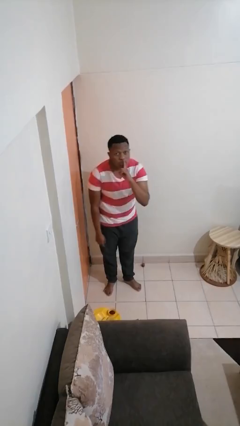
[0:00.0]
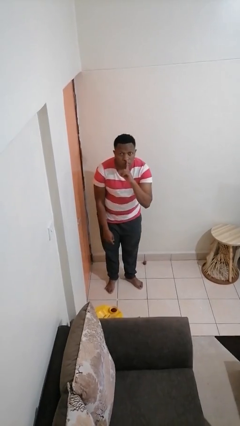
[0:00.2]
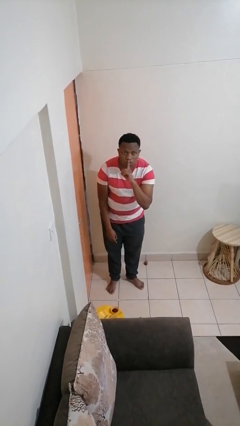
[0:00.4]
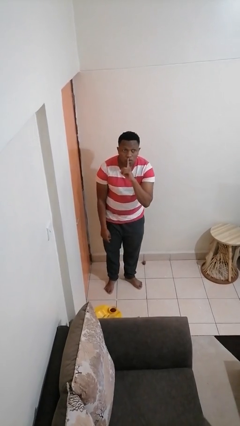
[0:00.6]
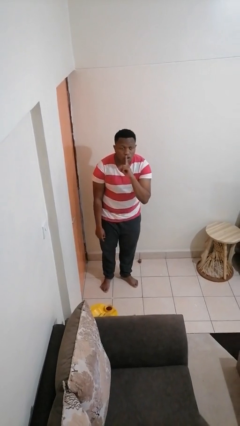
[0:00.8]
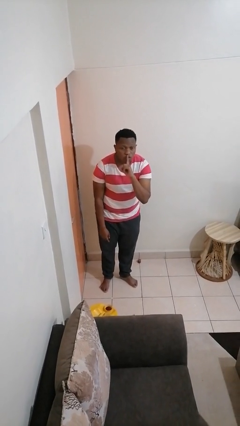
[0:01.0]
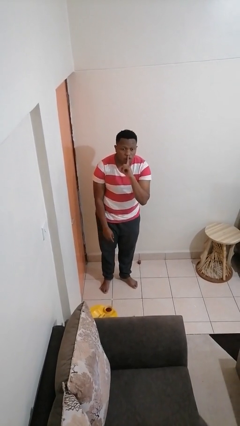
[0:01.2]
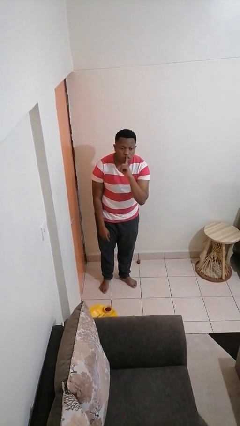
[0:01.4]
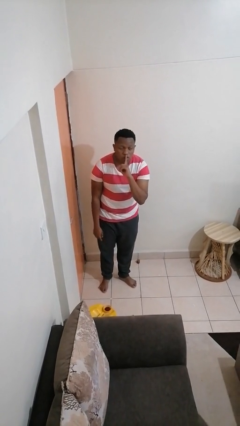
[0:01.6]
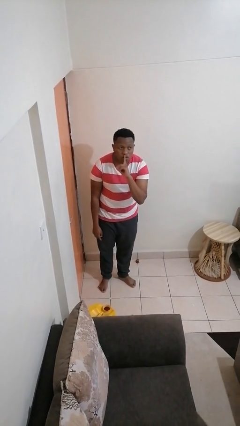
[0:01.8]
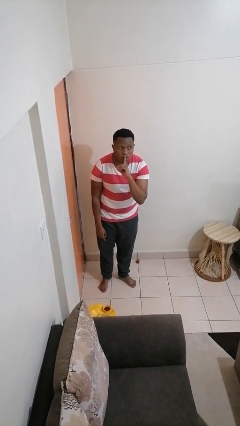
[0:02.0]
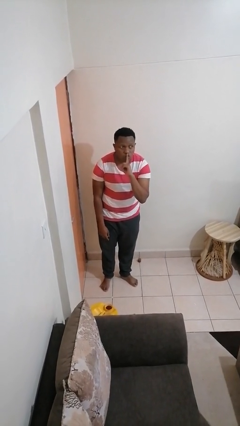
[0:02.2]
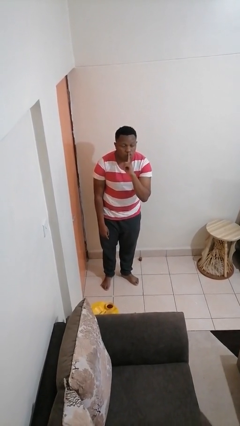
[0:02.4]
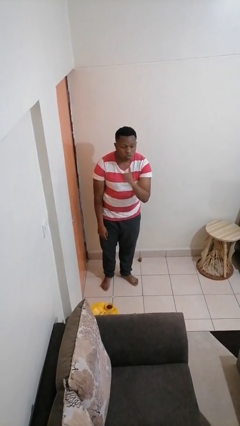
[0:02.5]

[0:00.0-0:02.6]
person gestures be quiet

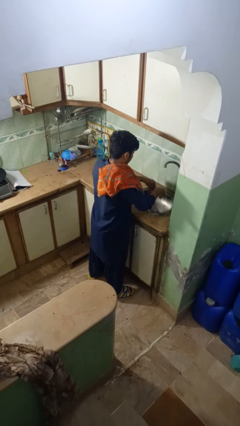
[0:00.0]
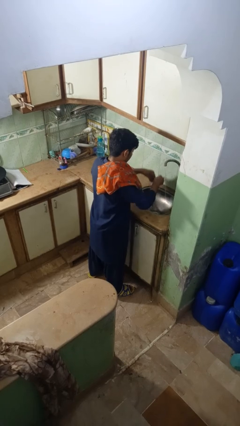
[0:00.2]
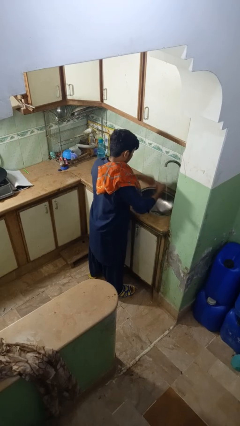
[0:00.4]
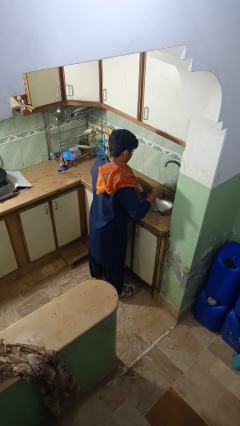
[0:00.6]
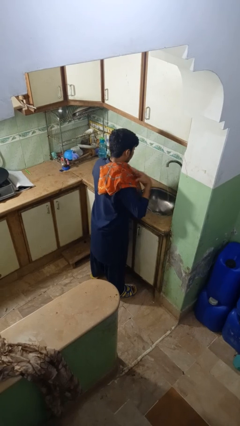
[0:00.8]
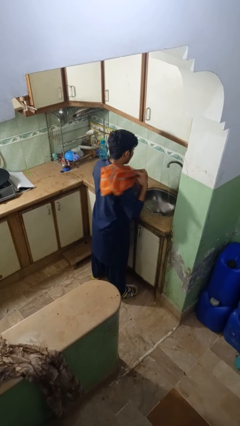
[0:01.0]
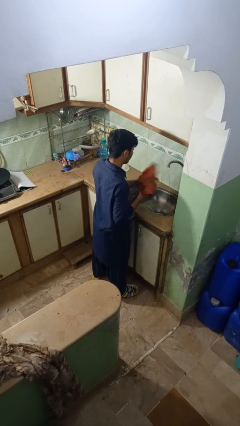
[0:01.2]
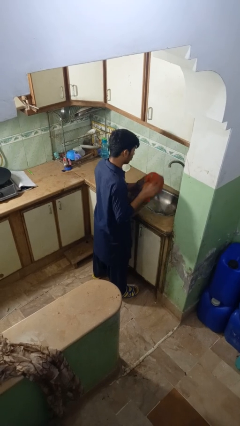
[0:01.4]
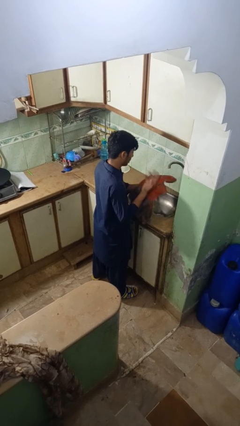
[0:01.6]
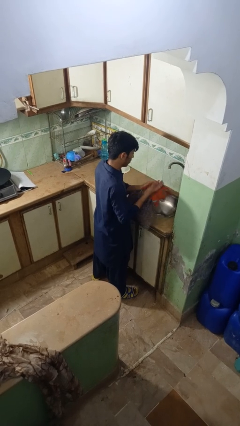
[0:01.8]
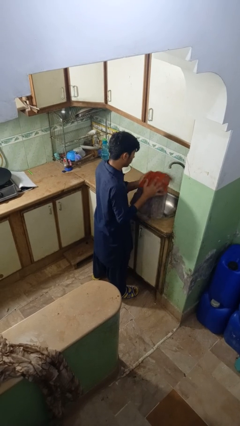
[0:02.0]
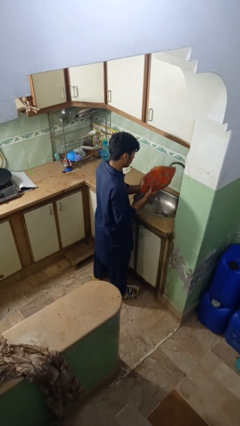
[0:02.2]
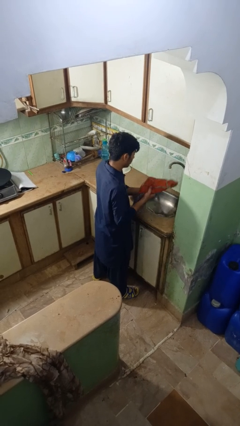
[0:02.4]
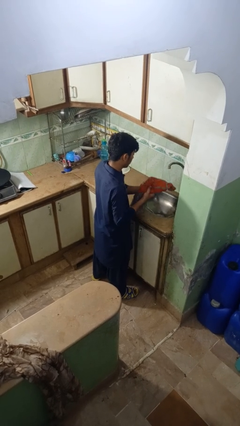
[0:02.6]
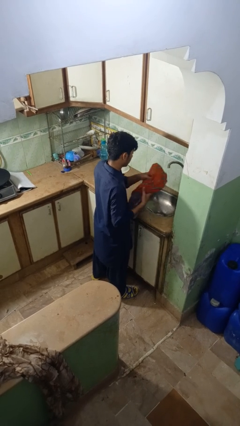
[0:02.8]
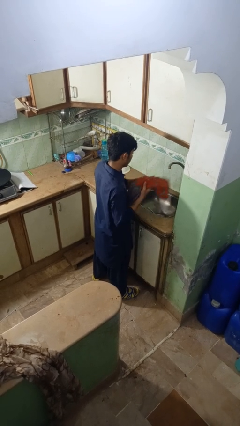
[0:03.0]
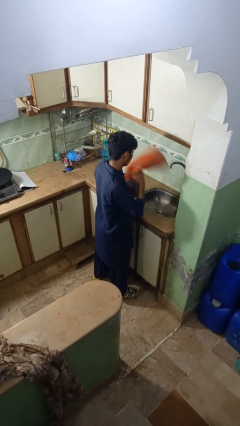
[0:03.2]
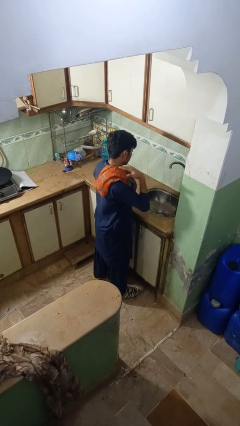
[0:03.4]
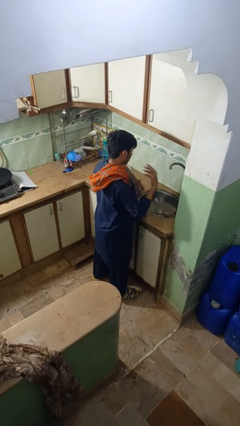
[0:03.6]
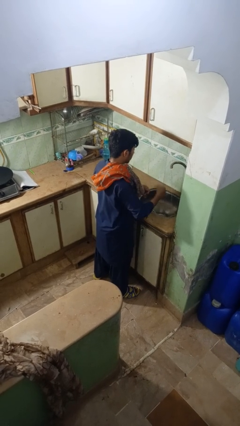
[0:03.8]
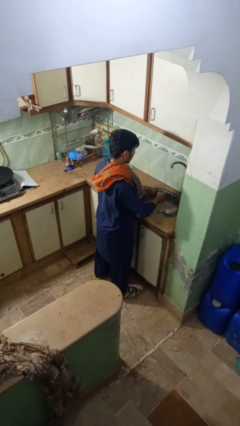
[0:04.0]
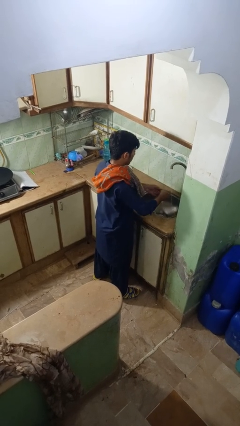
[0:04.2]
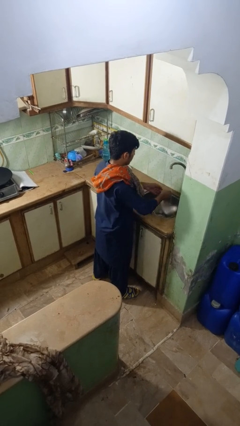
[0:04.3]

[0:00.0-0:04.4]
person dries hands with towel

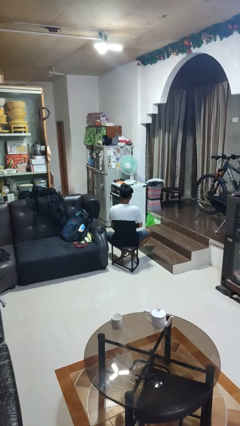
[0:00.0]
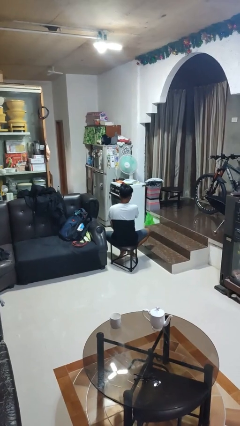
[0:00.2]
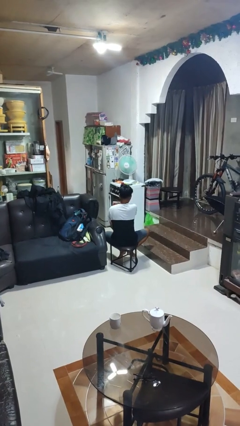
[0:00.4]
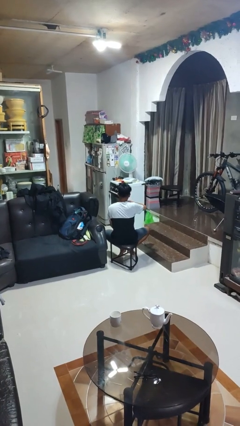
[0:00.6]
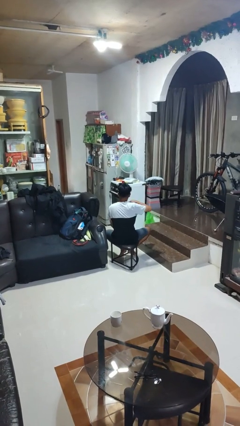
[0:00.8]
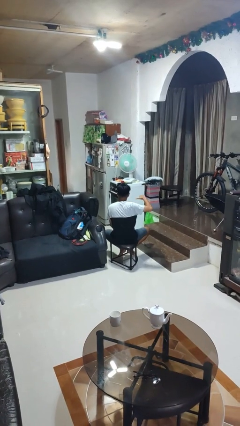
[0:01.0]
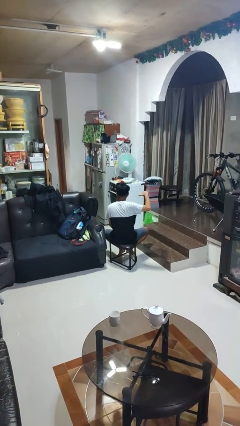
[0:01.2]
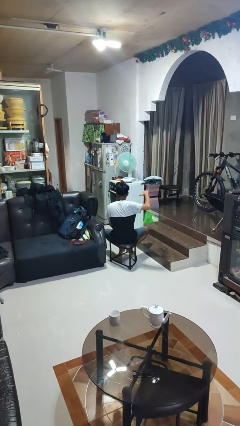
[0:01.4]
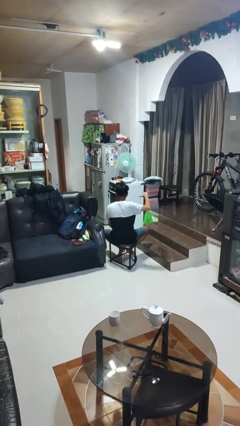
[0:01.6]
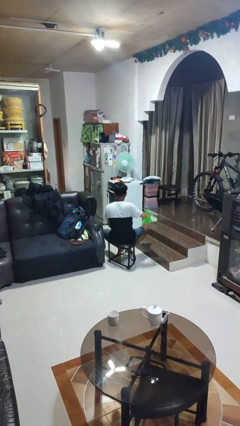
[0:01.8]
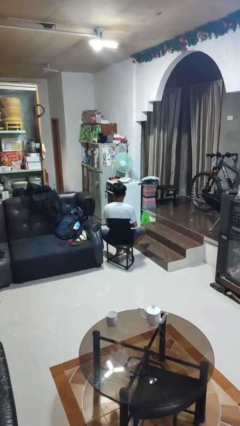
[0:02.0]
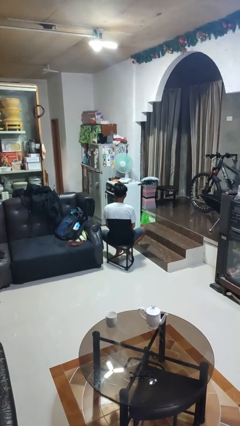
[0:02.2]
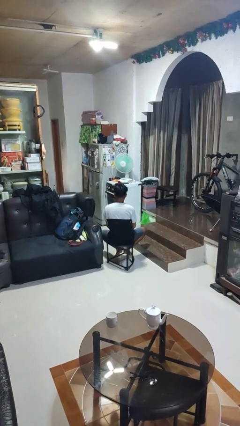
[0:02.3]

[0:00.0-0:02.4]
person gestures cut

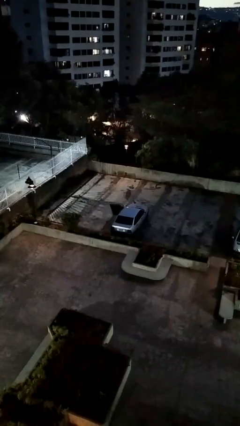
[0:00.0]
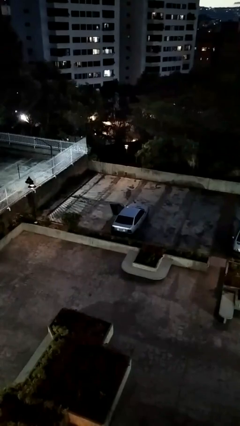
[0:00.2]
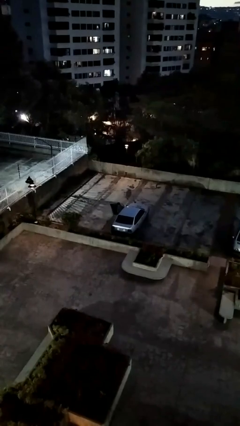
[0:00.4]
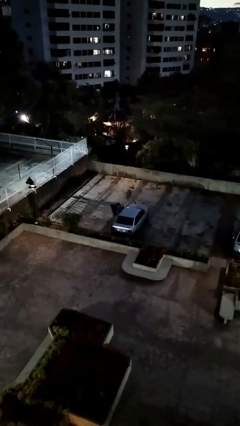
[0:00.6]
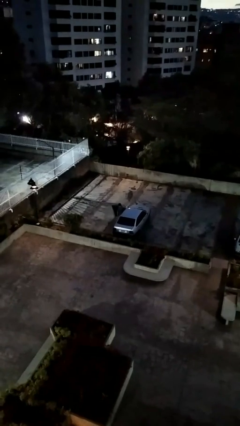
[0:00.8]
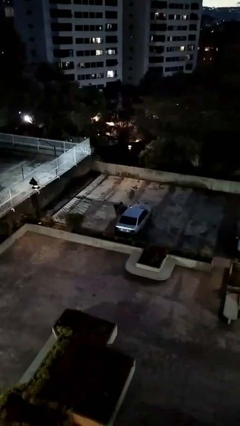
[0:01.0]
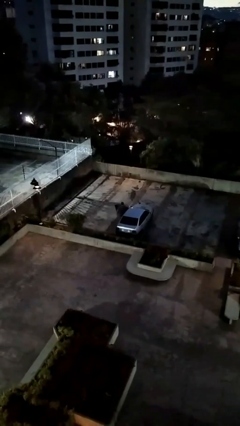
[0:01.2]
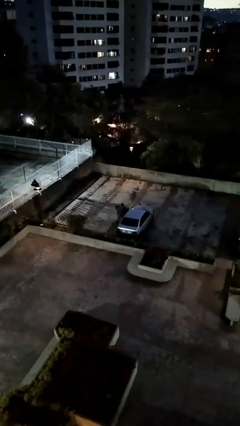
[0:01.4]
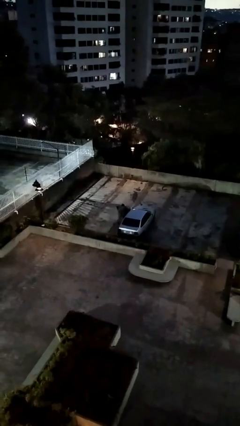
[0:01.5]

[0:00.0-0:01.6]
person exits car

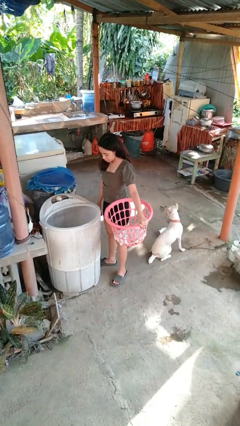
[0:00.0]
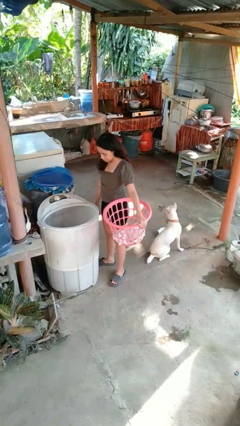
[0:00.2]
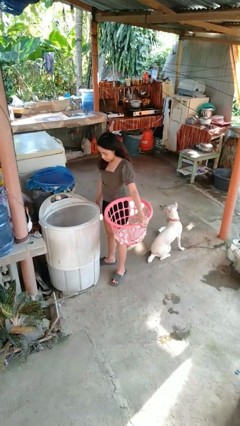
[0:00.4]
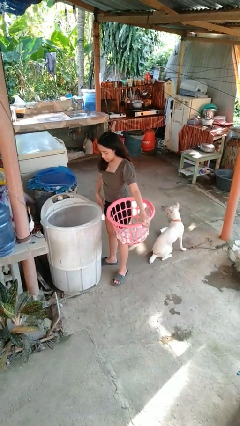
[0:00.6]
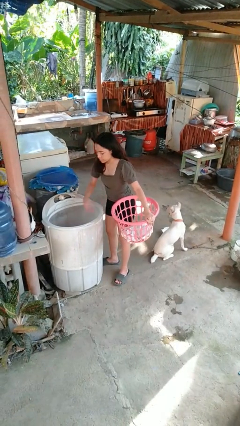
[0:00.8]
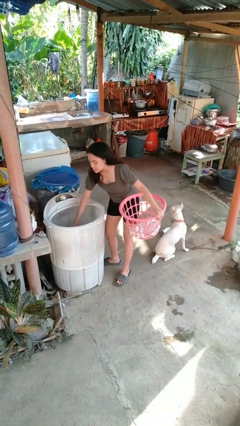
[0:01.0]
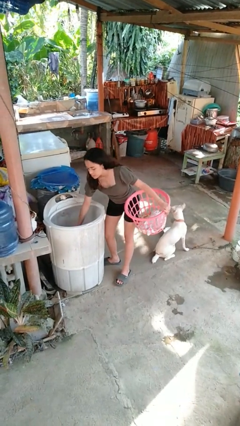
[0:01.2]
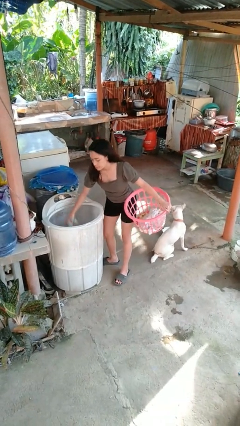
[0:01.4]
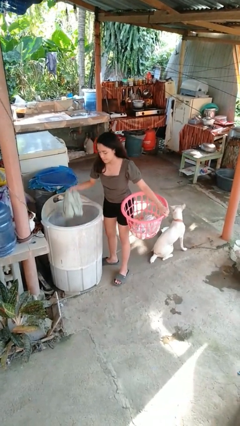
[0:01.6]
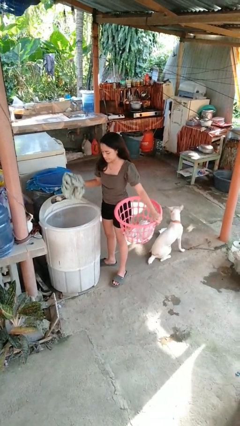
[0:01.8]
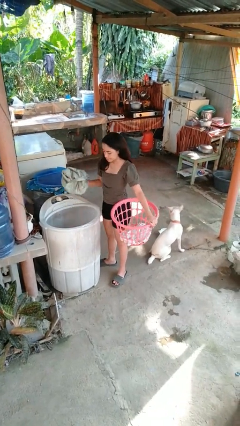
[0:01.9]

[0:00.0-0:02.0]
person unloads dryer

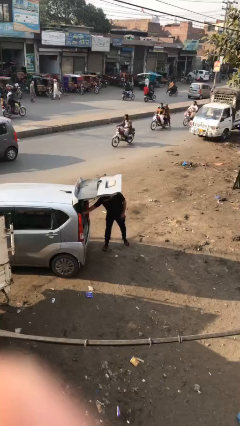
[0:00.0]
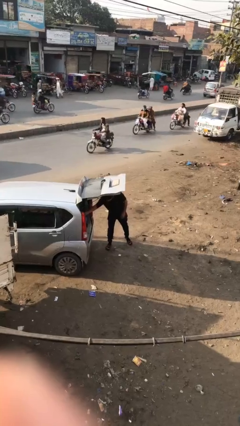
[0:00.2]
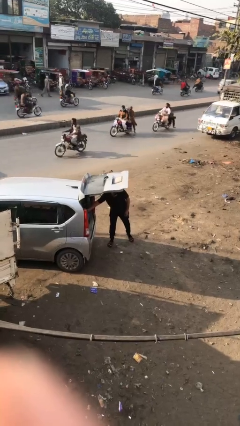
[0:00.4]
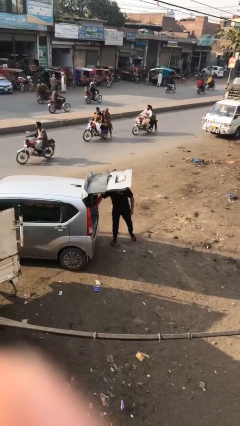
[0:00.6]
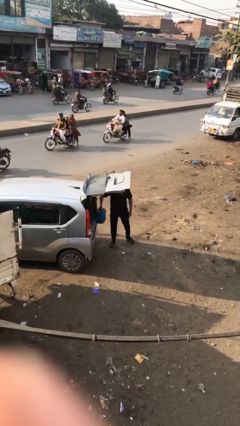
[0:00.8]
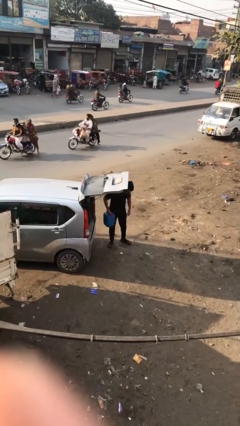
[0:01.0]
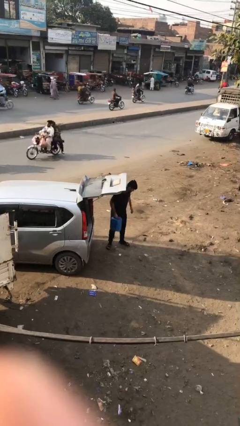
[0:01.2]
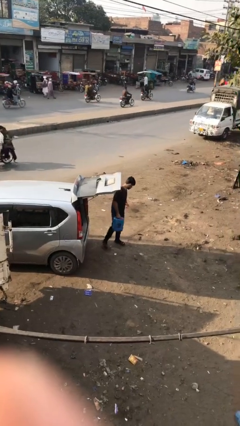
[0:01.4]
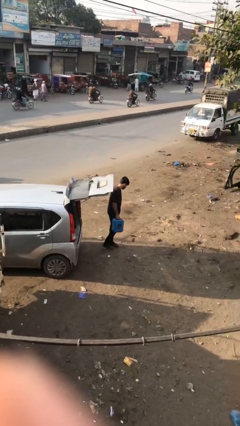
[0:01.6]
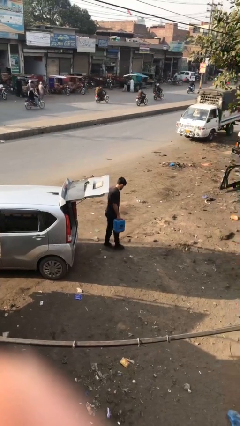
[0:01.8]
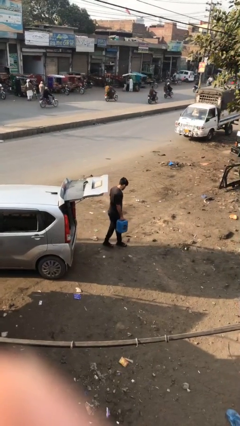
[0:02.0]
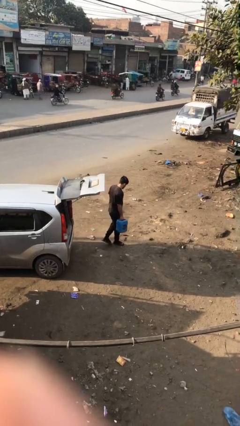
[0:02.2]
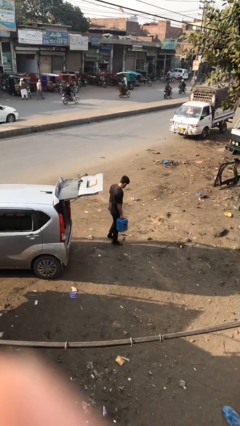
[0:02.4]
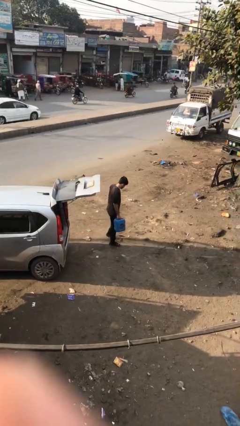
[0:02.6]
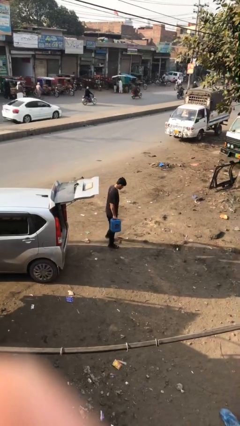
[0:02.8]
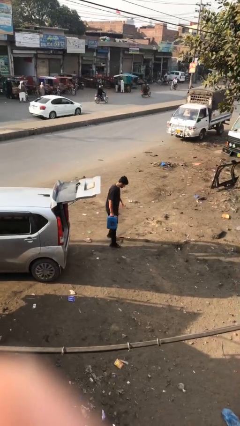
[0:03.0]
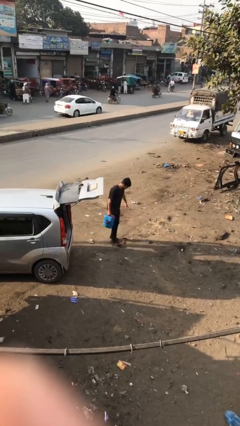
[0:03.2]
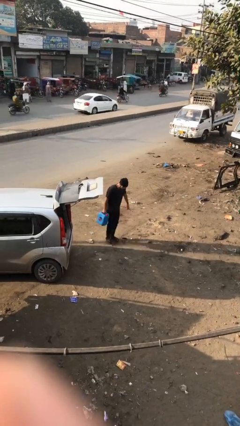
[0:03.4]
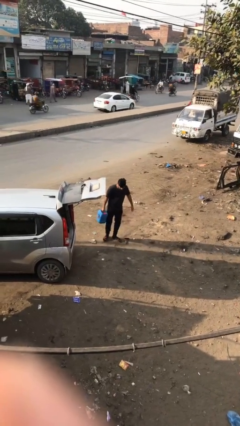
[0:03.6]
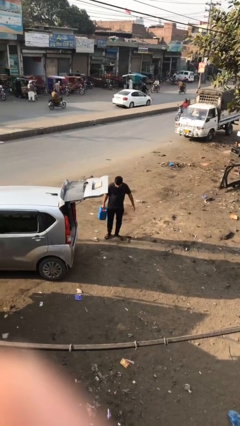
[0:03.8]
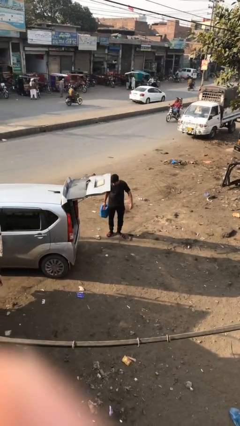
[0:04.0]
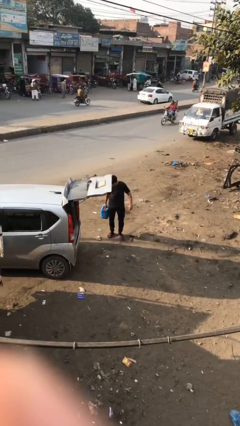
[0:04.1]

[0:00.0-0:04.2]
person unloads car
